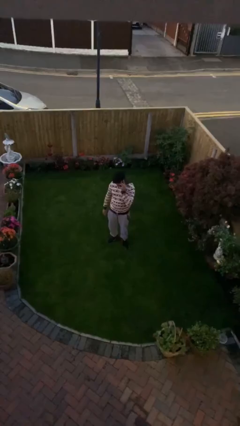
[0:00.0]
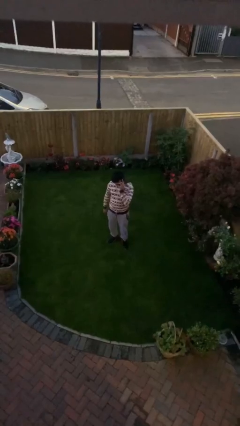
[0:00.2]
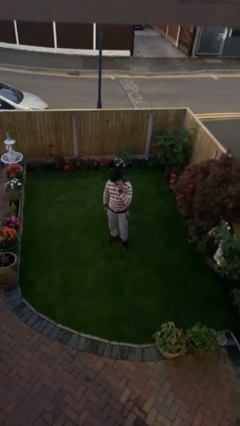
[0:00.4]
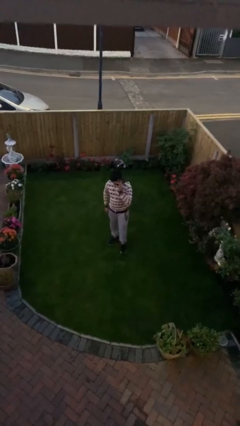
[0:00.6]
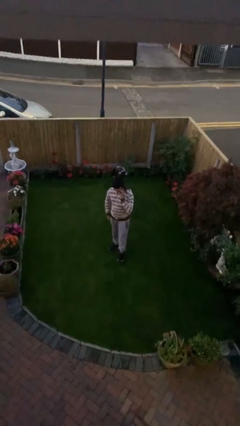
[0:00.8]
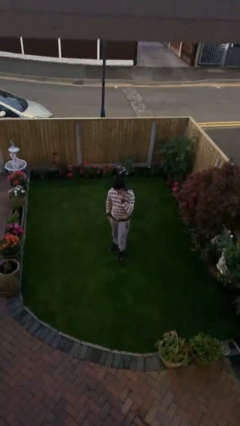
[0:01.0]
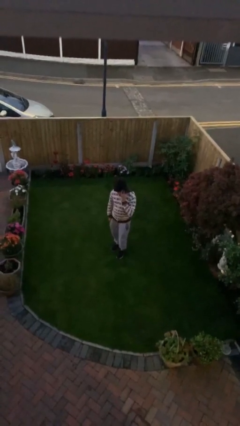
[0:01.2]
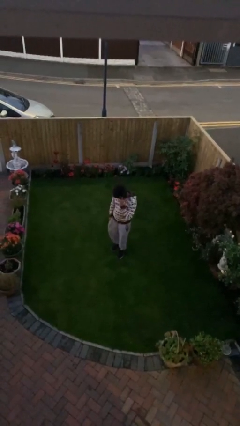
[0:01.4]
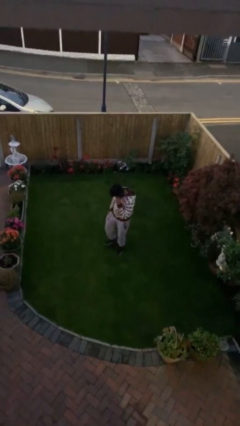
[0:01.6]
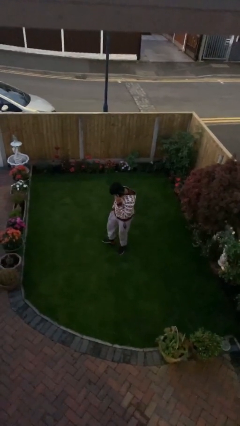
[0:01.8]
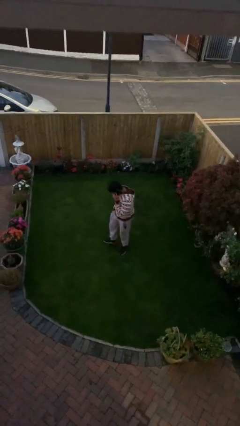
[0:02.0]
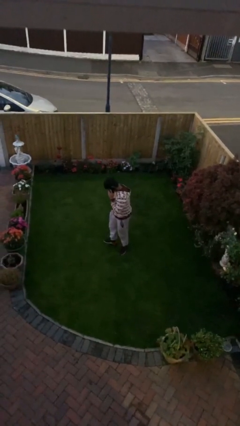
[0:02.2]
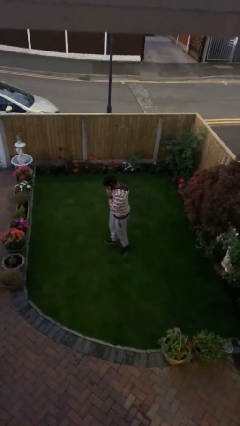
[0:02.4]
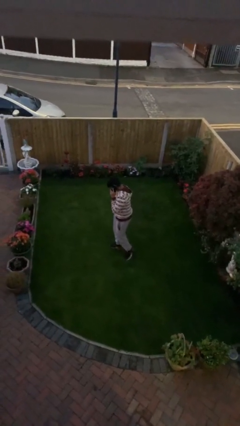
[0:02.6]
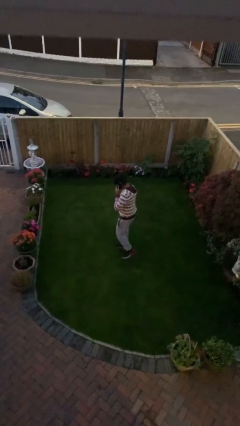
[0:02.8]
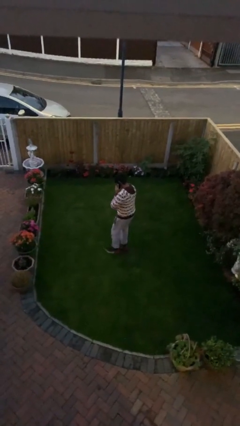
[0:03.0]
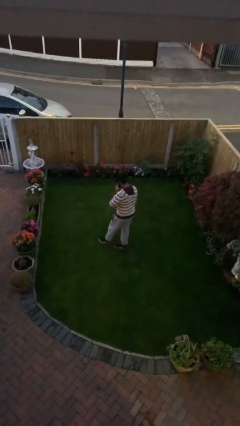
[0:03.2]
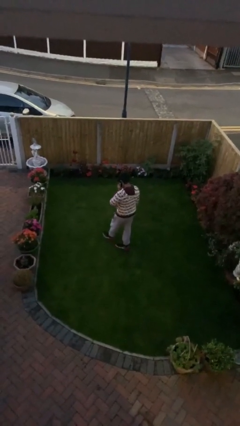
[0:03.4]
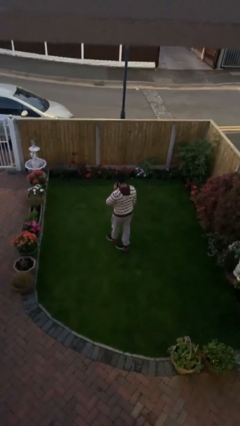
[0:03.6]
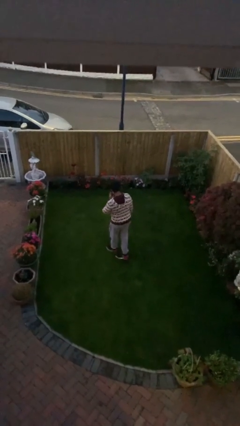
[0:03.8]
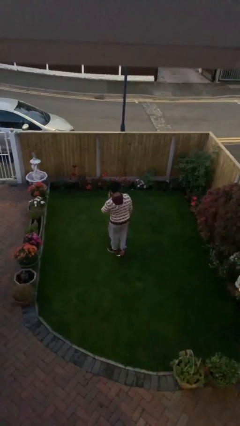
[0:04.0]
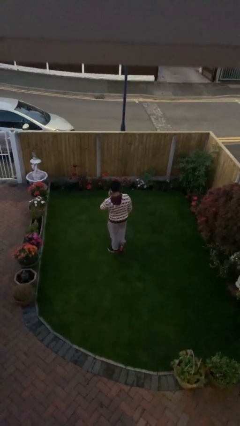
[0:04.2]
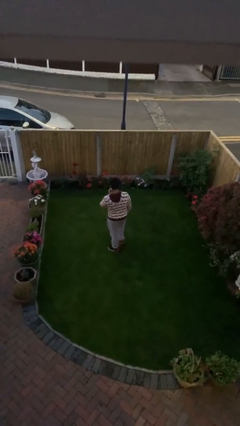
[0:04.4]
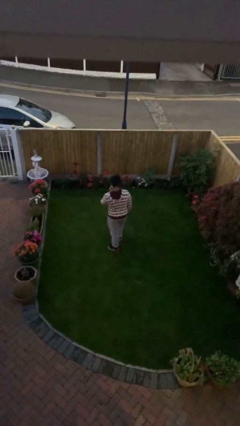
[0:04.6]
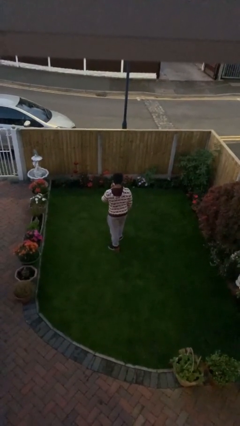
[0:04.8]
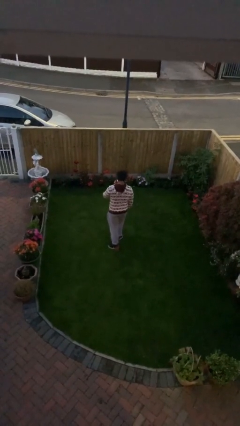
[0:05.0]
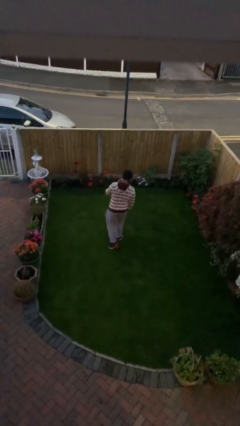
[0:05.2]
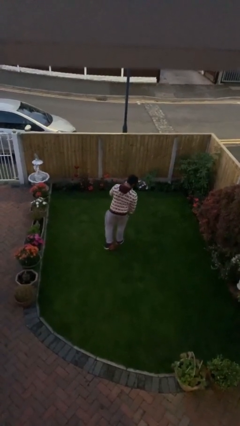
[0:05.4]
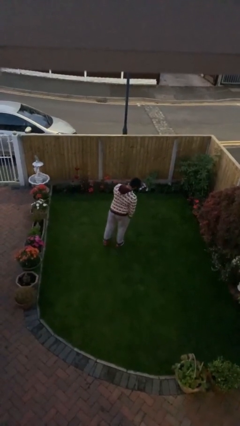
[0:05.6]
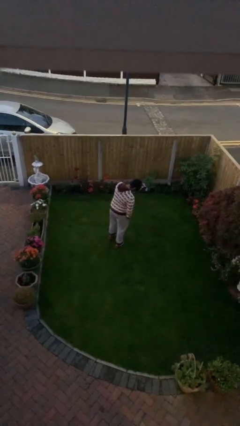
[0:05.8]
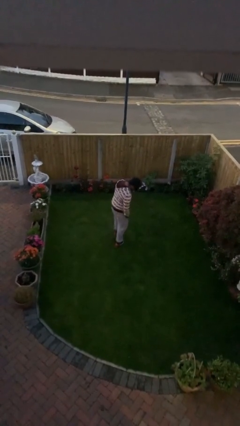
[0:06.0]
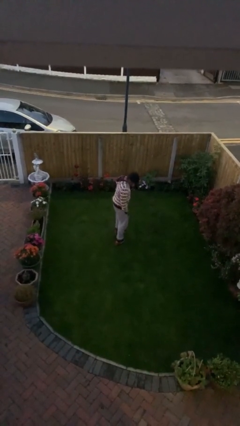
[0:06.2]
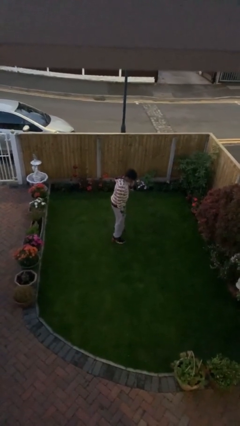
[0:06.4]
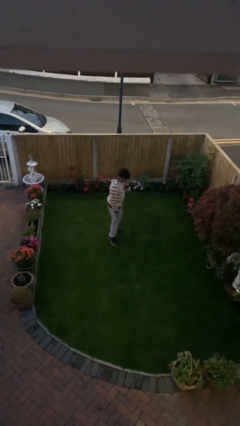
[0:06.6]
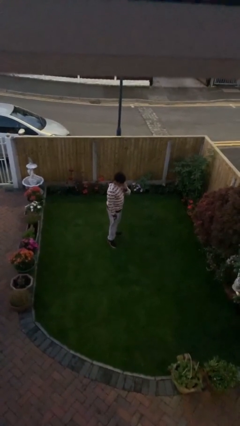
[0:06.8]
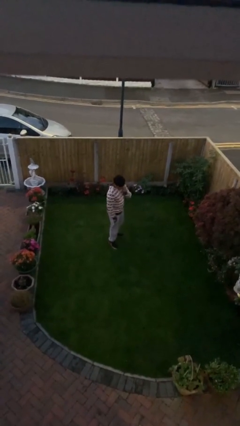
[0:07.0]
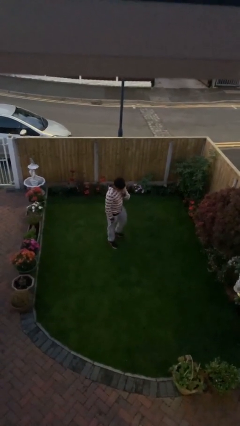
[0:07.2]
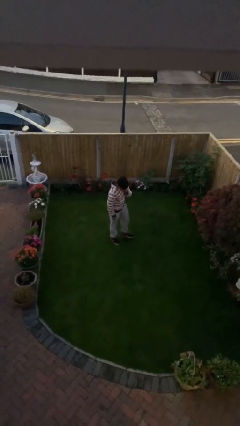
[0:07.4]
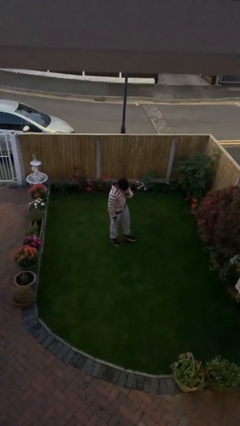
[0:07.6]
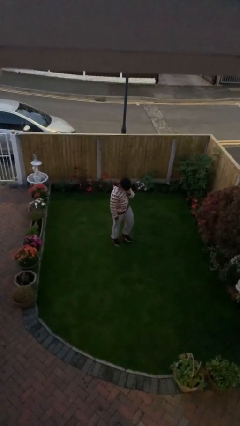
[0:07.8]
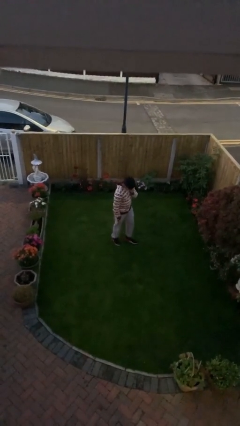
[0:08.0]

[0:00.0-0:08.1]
person talks on phone

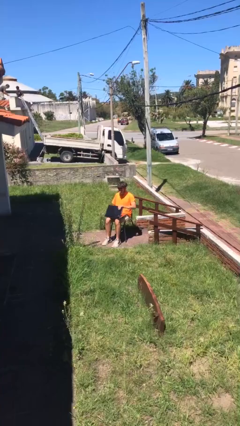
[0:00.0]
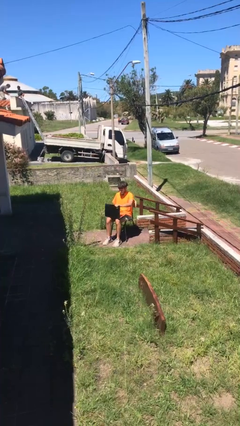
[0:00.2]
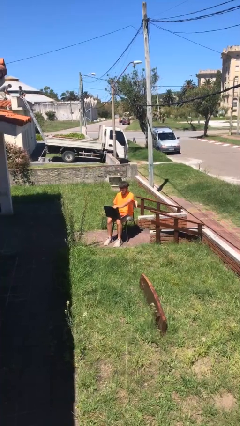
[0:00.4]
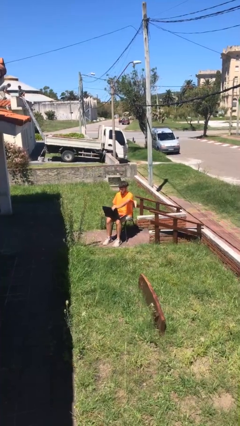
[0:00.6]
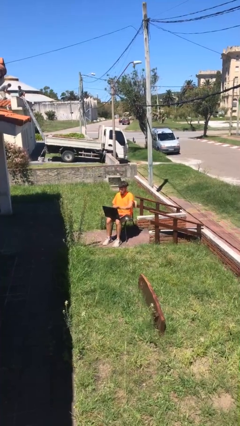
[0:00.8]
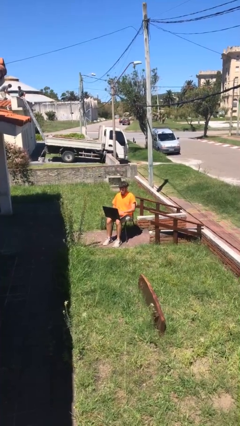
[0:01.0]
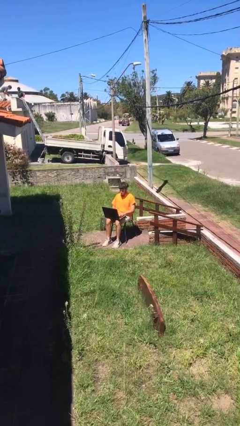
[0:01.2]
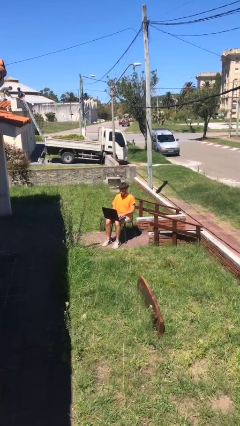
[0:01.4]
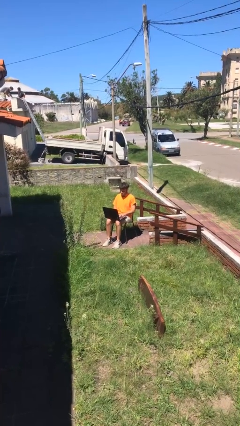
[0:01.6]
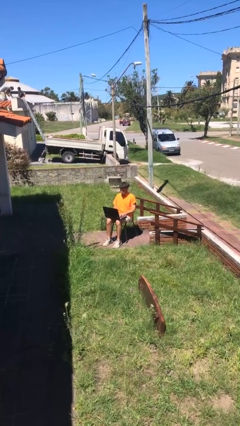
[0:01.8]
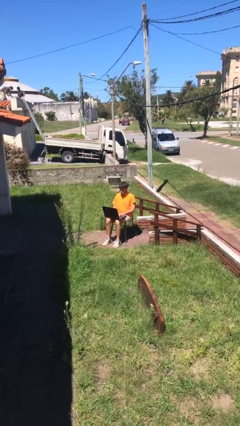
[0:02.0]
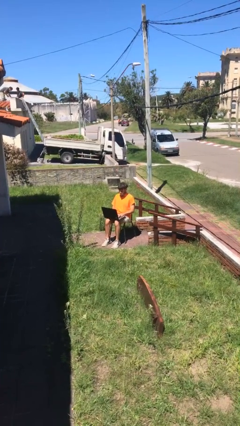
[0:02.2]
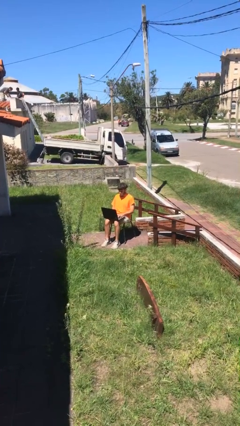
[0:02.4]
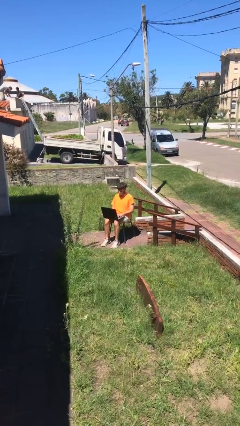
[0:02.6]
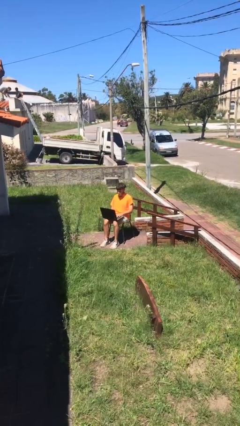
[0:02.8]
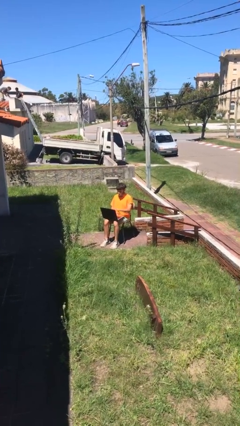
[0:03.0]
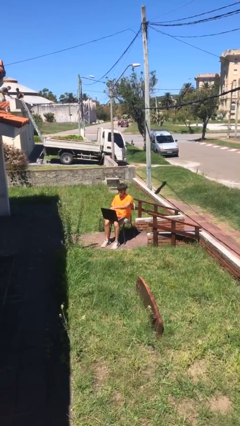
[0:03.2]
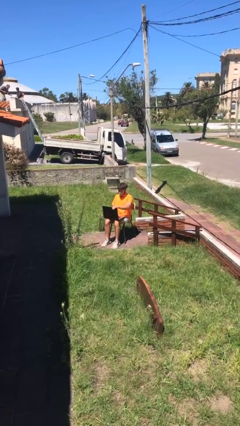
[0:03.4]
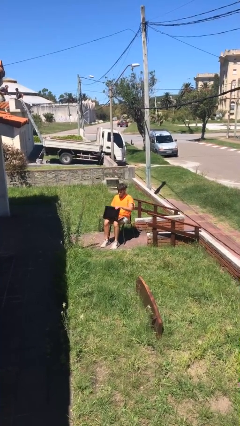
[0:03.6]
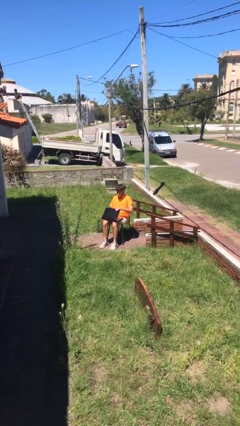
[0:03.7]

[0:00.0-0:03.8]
person interacts with laptop

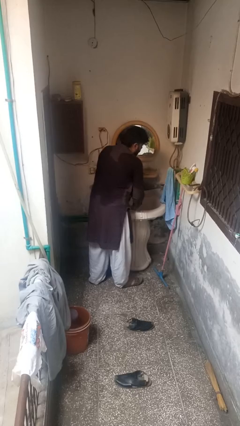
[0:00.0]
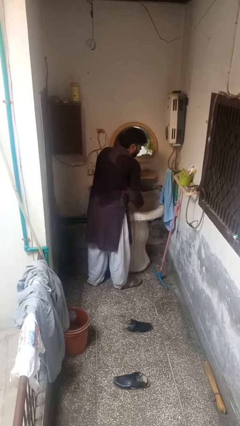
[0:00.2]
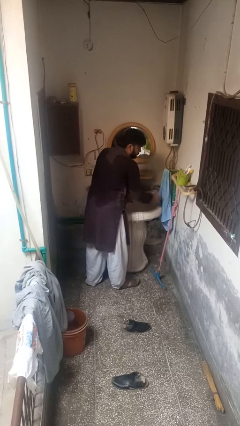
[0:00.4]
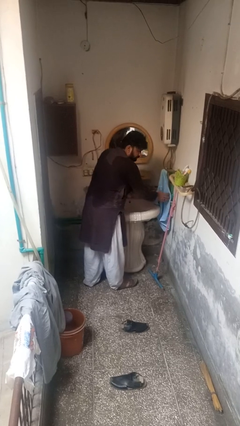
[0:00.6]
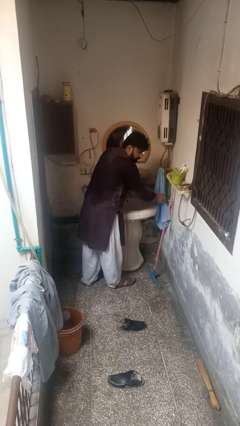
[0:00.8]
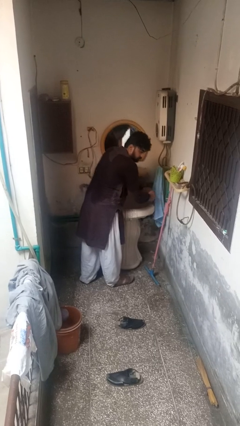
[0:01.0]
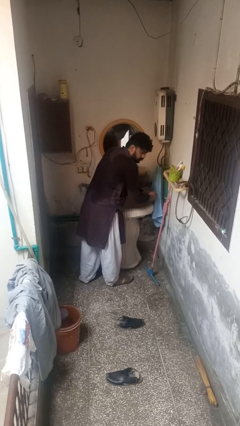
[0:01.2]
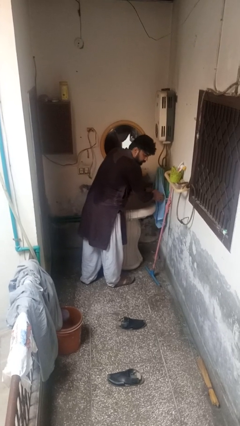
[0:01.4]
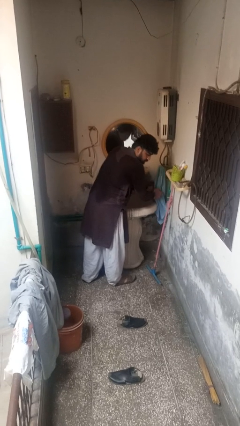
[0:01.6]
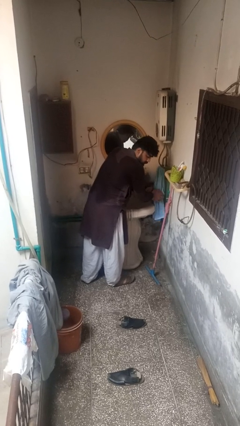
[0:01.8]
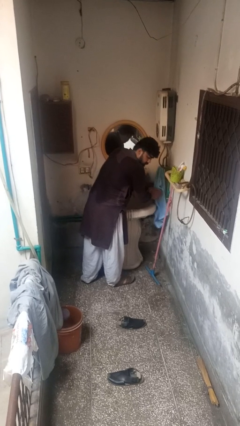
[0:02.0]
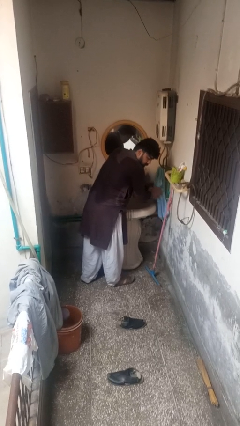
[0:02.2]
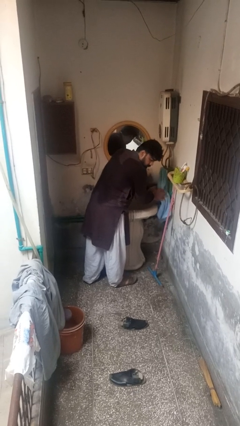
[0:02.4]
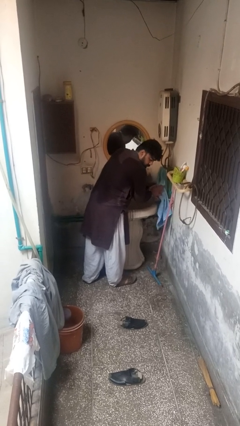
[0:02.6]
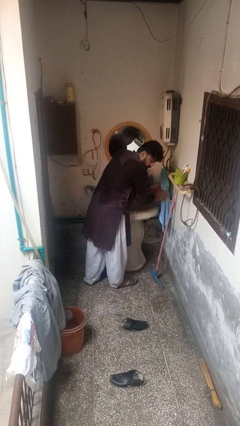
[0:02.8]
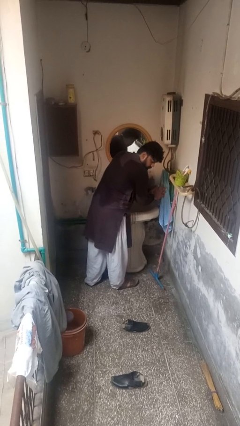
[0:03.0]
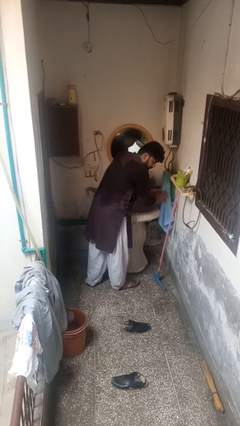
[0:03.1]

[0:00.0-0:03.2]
person dries hands with towel

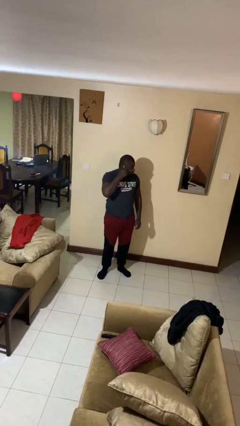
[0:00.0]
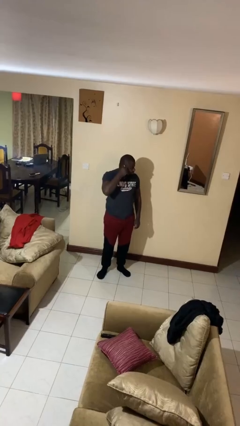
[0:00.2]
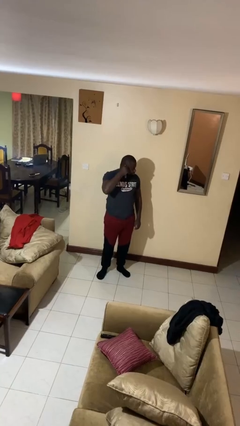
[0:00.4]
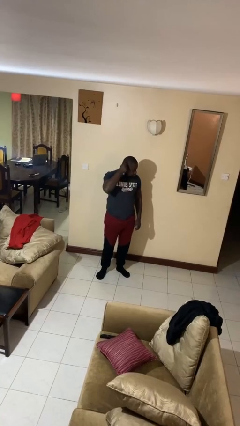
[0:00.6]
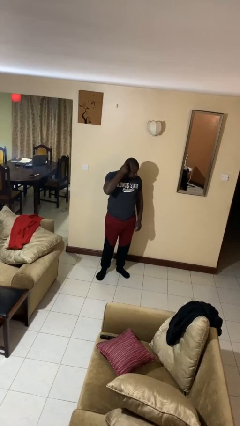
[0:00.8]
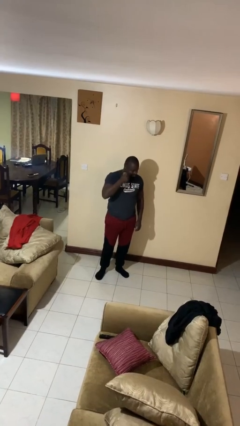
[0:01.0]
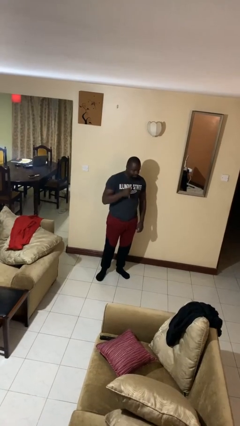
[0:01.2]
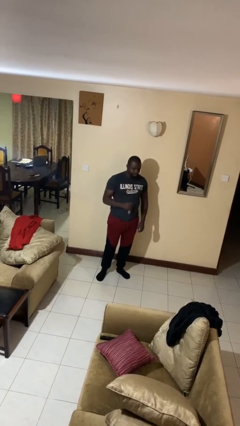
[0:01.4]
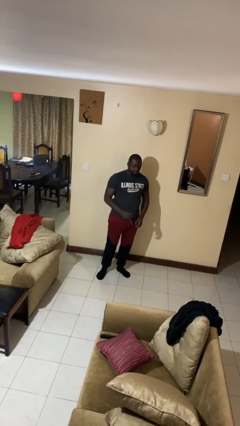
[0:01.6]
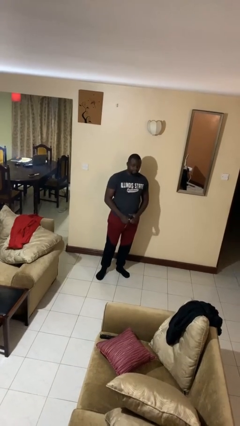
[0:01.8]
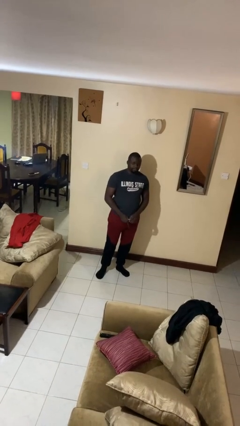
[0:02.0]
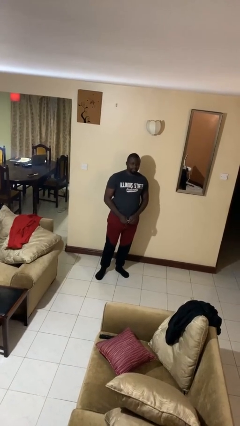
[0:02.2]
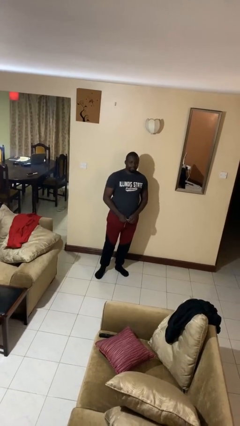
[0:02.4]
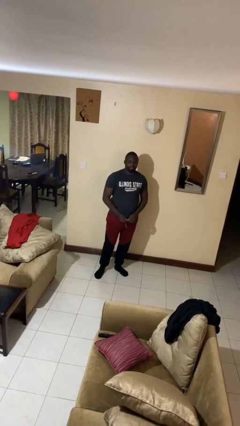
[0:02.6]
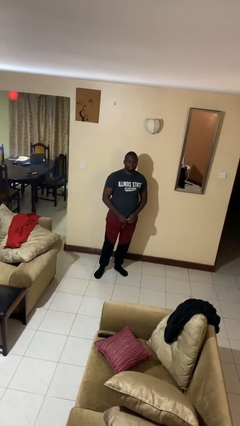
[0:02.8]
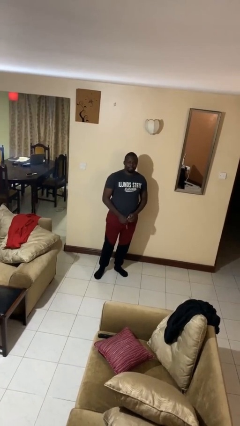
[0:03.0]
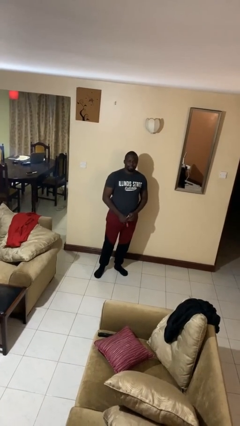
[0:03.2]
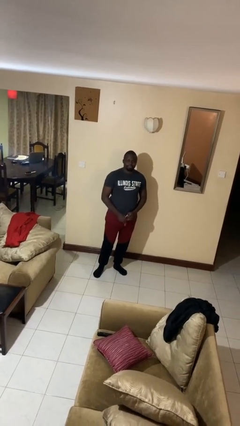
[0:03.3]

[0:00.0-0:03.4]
person takes off earrings
